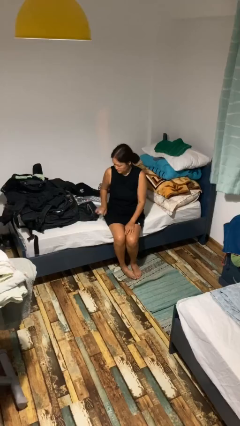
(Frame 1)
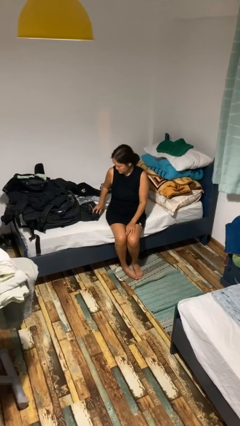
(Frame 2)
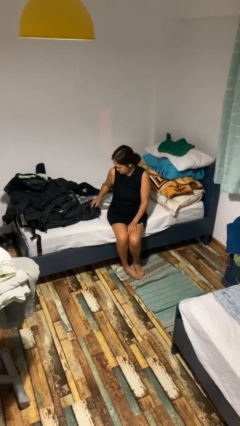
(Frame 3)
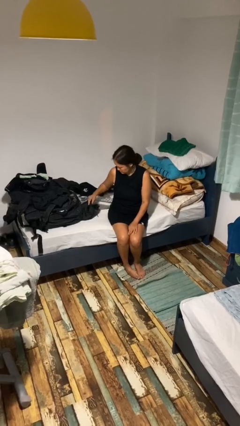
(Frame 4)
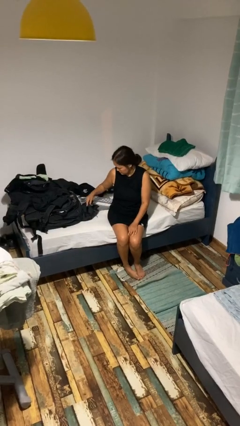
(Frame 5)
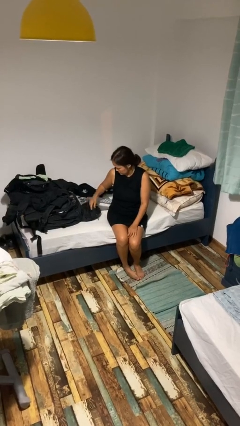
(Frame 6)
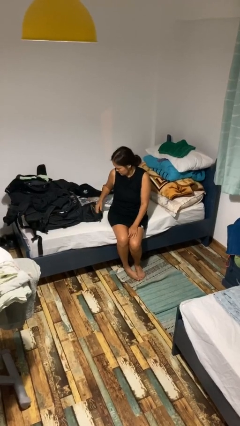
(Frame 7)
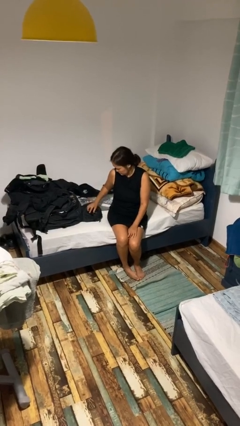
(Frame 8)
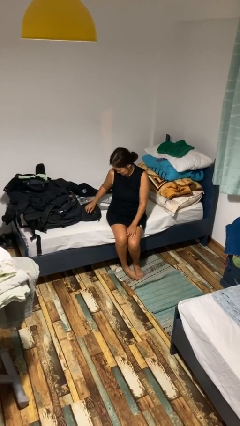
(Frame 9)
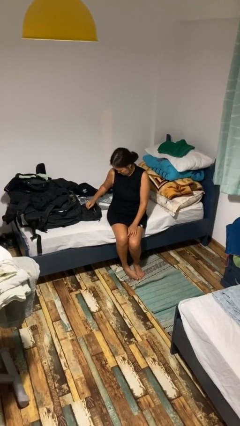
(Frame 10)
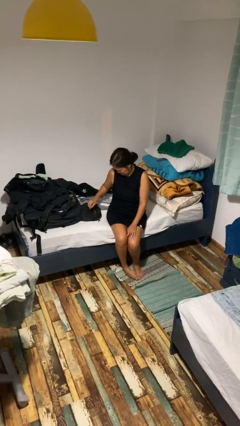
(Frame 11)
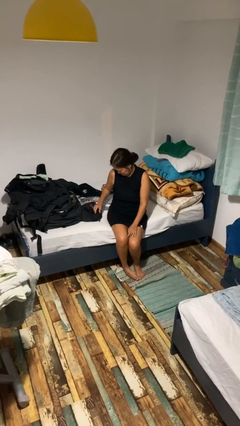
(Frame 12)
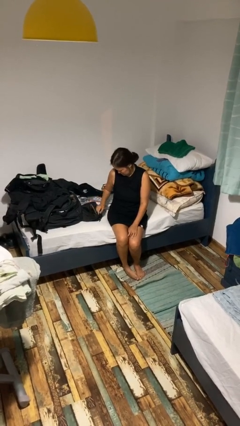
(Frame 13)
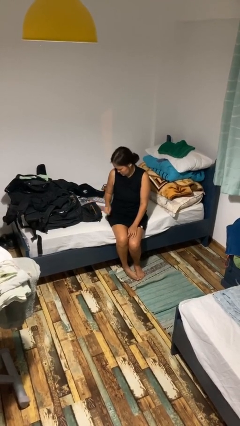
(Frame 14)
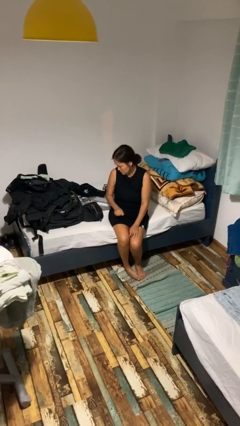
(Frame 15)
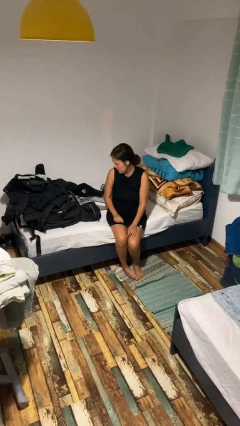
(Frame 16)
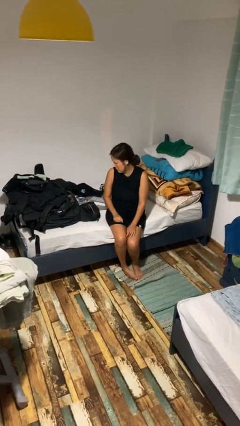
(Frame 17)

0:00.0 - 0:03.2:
person taps object with finger

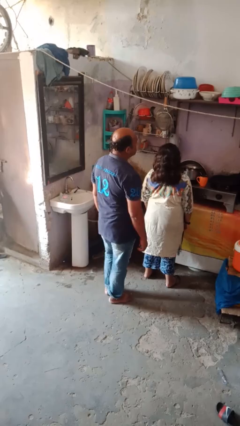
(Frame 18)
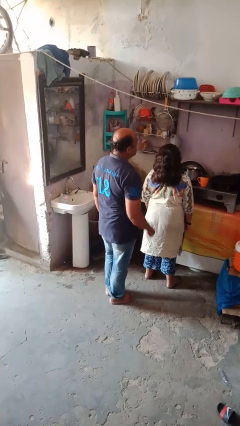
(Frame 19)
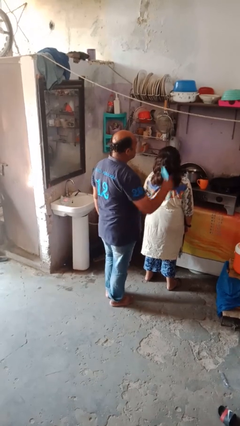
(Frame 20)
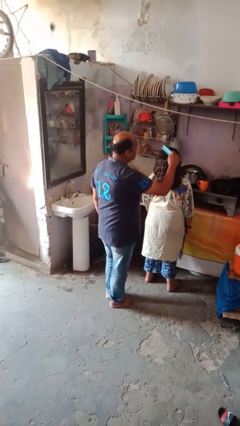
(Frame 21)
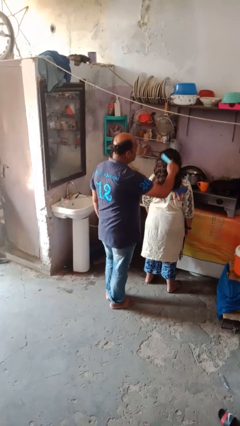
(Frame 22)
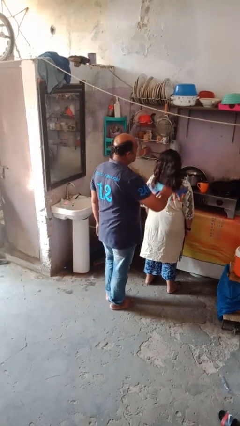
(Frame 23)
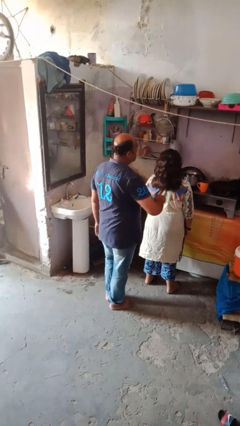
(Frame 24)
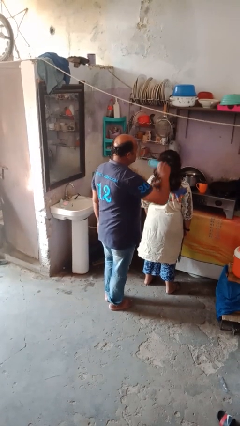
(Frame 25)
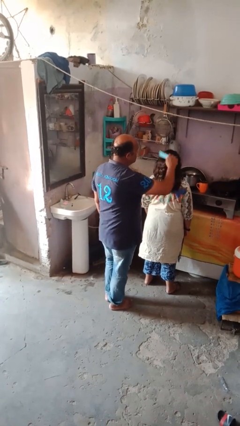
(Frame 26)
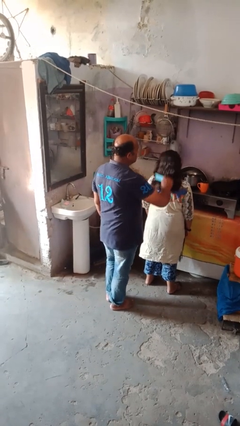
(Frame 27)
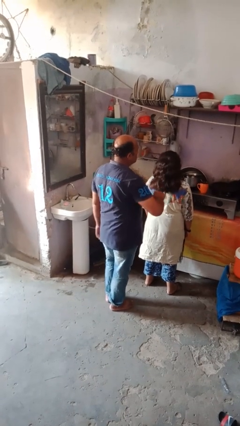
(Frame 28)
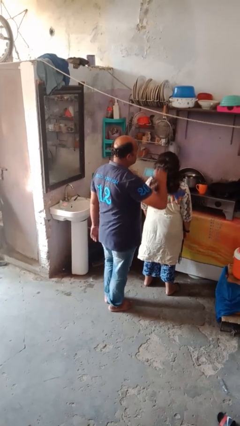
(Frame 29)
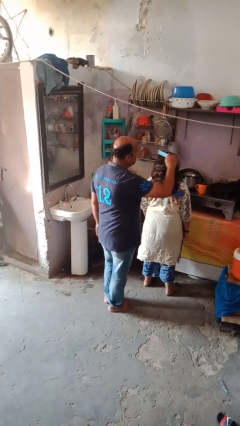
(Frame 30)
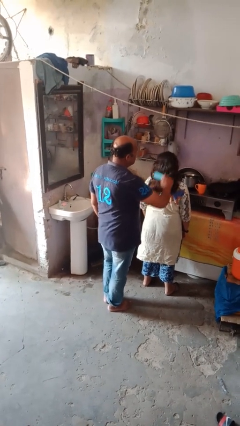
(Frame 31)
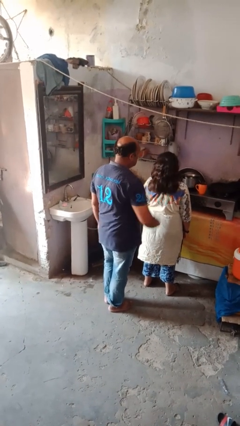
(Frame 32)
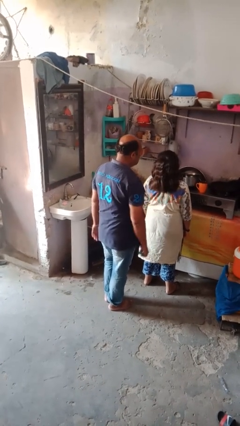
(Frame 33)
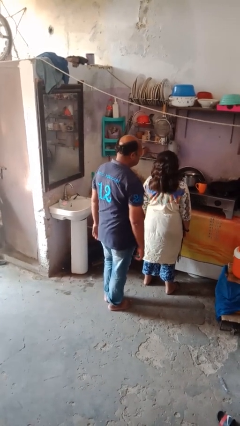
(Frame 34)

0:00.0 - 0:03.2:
person brushes hair of person

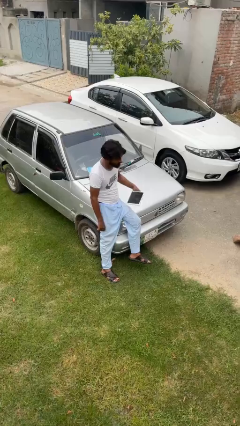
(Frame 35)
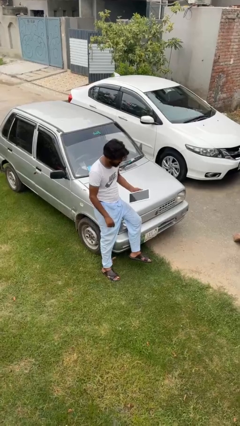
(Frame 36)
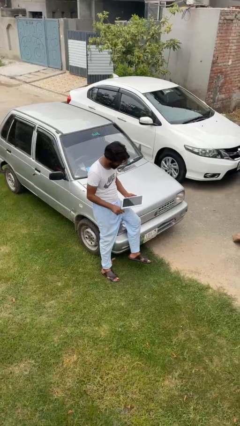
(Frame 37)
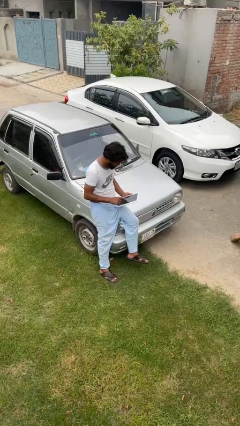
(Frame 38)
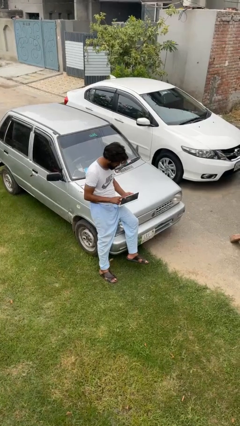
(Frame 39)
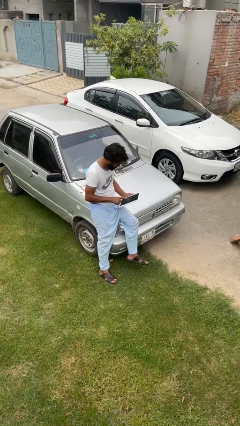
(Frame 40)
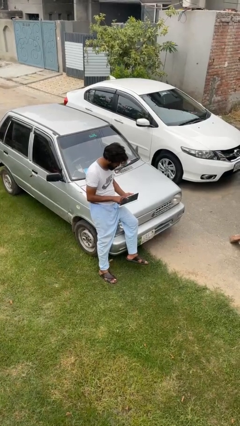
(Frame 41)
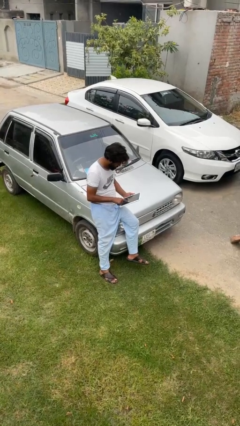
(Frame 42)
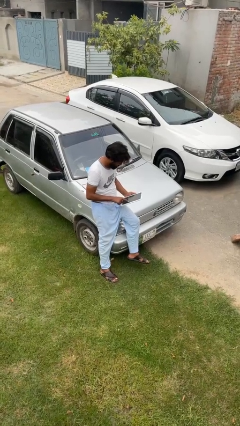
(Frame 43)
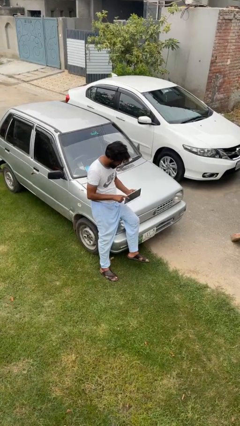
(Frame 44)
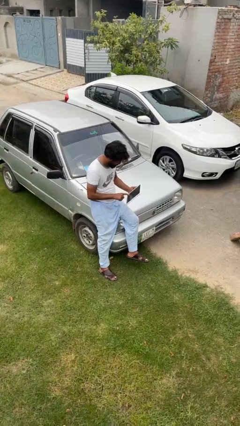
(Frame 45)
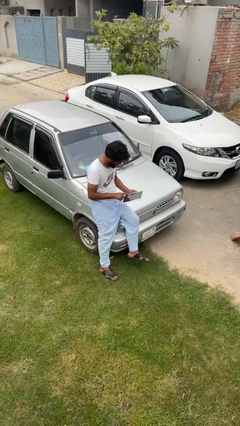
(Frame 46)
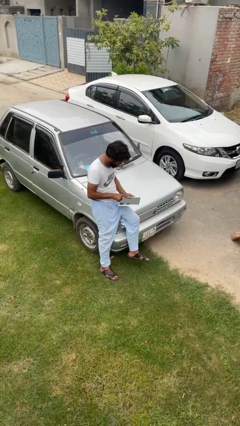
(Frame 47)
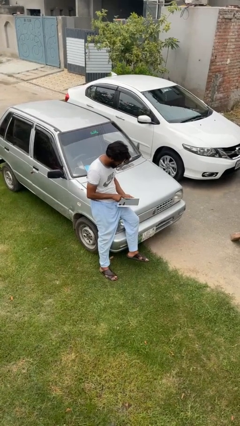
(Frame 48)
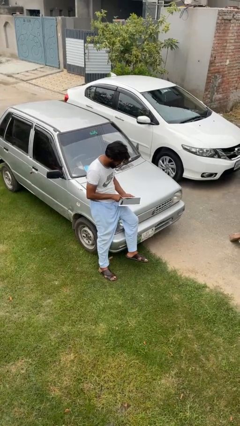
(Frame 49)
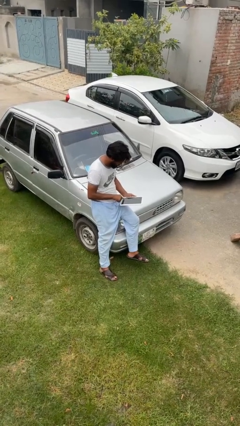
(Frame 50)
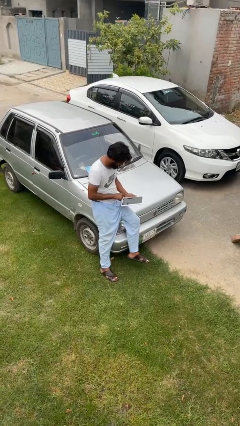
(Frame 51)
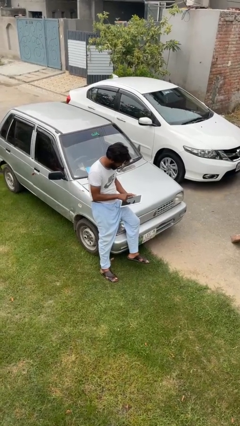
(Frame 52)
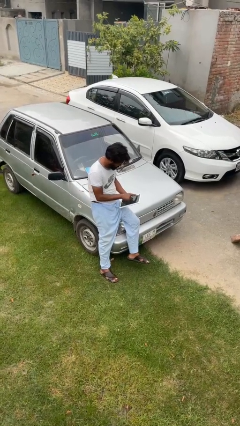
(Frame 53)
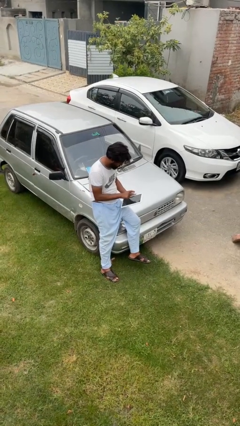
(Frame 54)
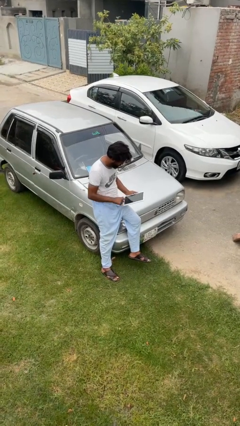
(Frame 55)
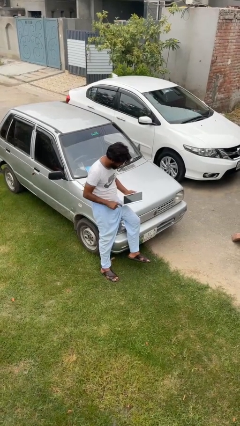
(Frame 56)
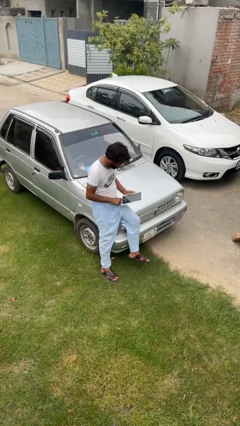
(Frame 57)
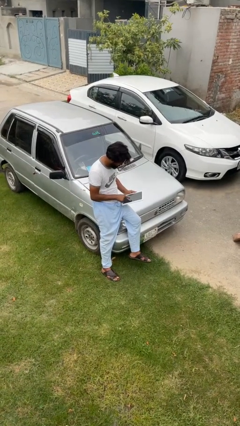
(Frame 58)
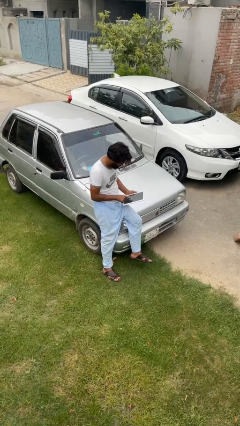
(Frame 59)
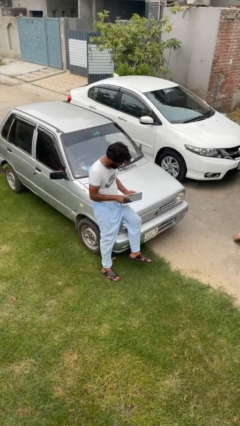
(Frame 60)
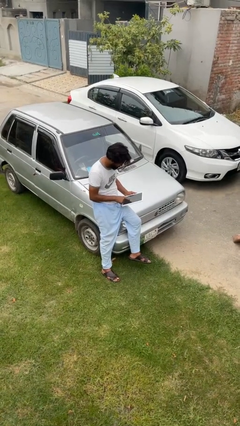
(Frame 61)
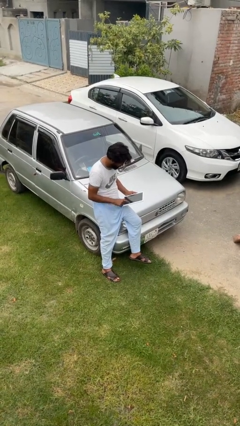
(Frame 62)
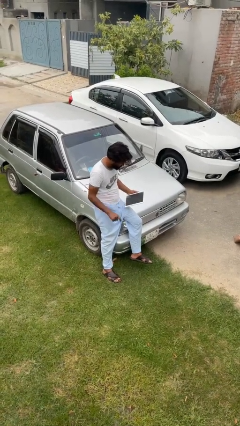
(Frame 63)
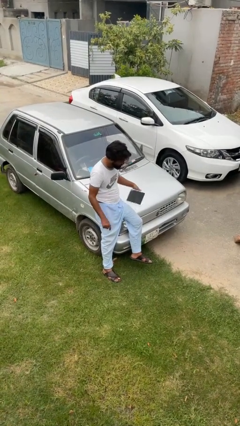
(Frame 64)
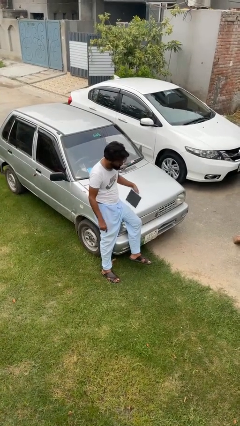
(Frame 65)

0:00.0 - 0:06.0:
person interacts with tablet

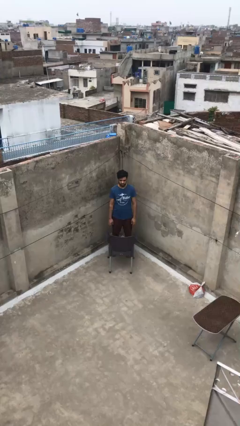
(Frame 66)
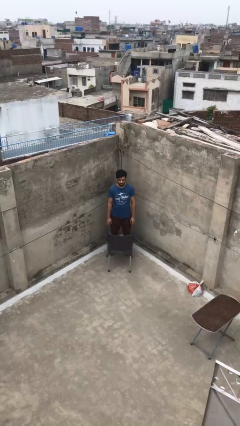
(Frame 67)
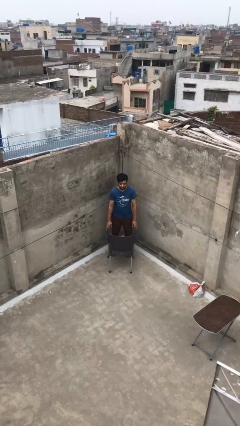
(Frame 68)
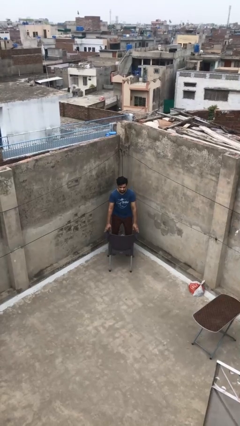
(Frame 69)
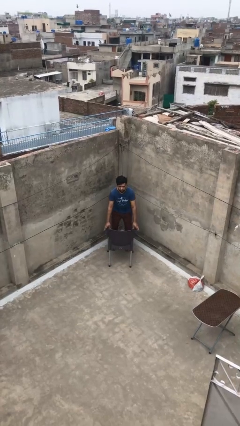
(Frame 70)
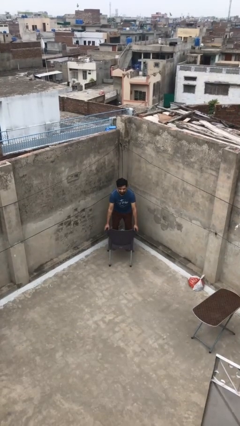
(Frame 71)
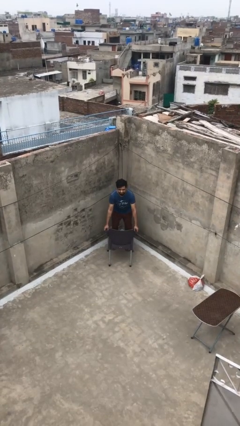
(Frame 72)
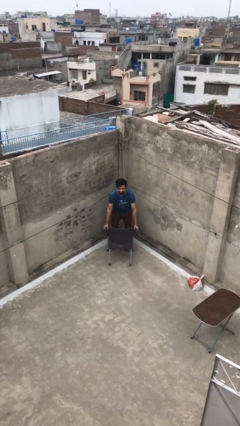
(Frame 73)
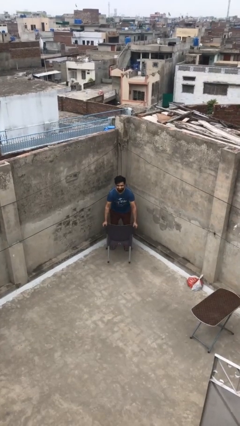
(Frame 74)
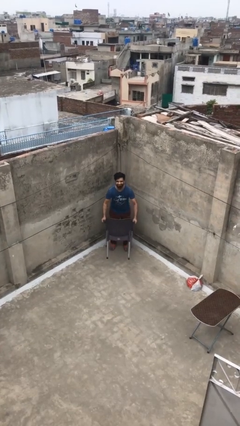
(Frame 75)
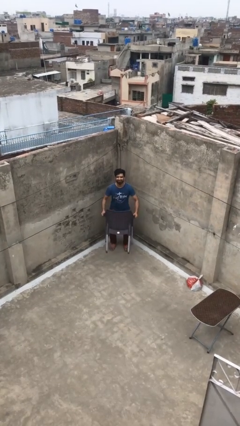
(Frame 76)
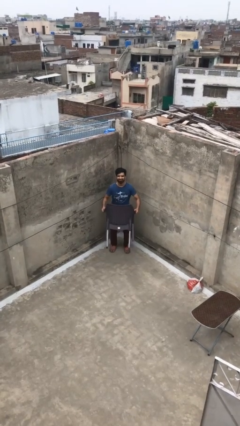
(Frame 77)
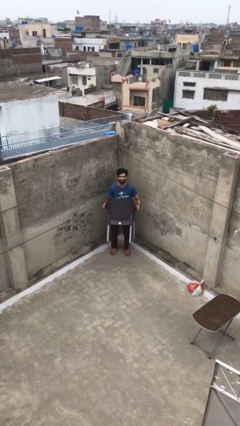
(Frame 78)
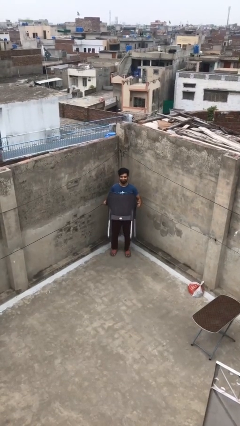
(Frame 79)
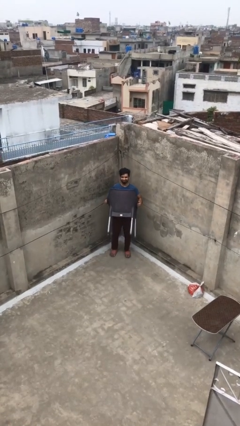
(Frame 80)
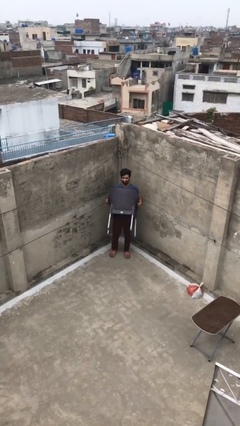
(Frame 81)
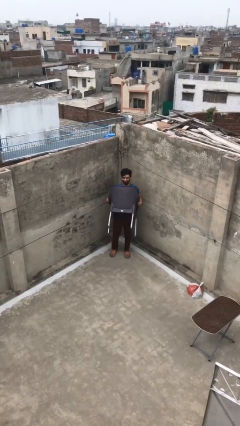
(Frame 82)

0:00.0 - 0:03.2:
person picks up object from floor

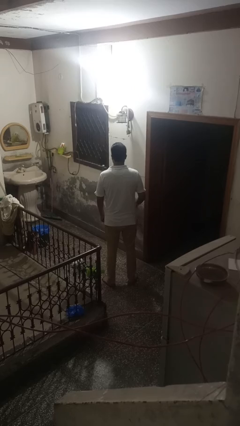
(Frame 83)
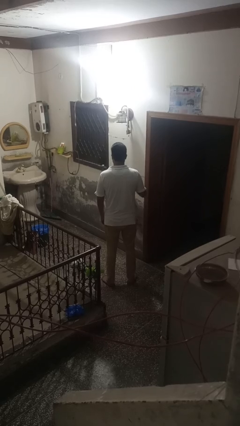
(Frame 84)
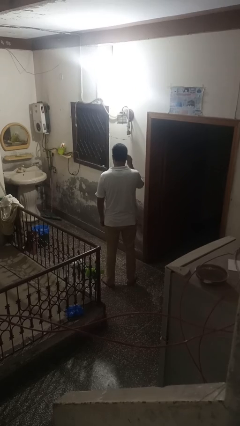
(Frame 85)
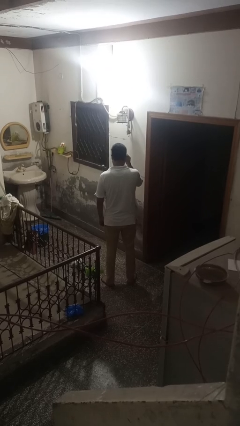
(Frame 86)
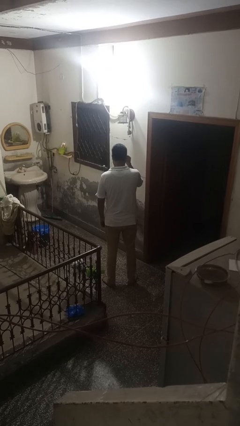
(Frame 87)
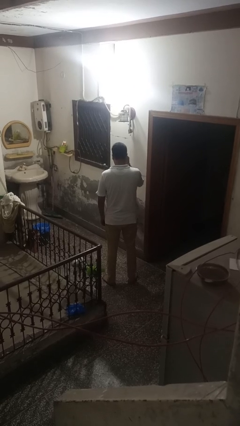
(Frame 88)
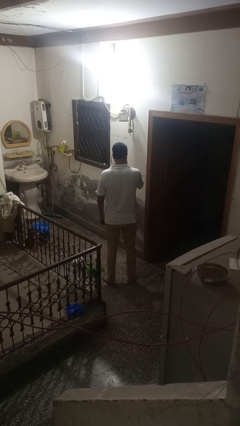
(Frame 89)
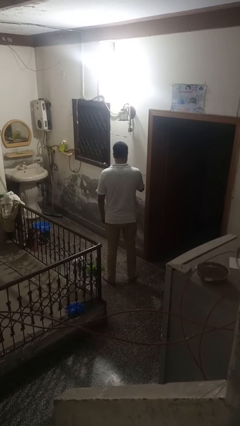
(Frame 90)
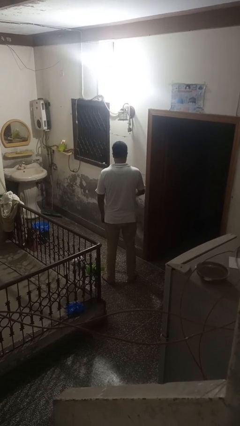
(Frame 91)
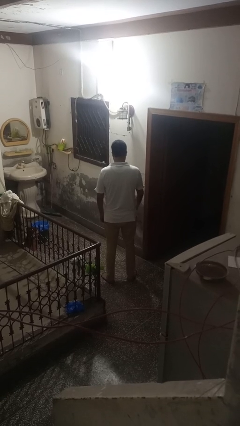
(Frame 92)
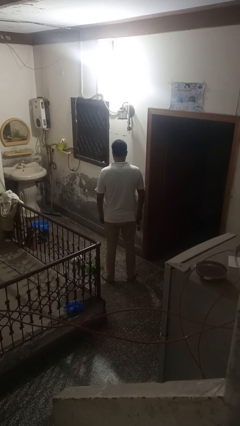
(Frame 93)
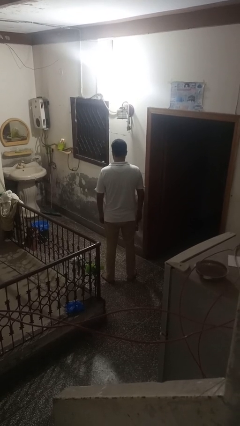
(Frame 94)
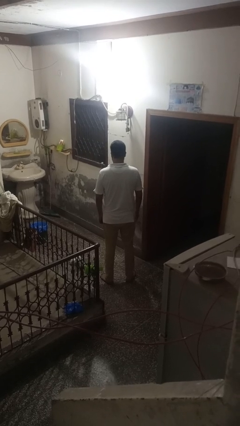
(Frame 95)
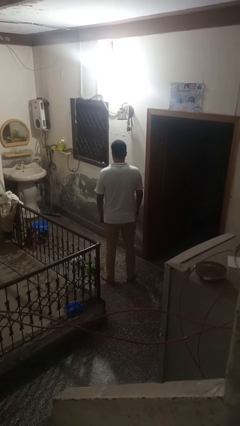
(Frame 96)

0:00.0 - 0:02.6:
person takes off sunglasses
